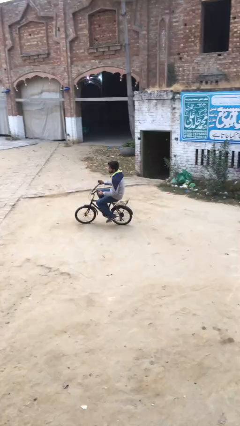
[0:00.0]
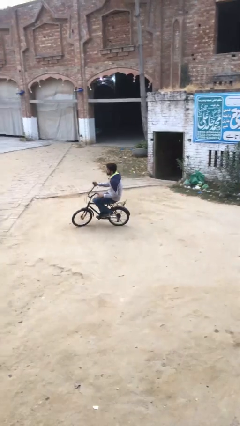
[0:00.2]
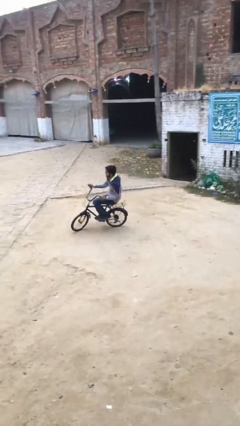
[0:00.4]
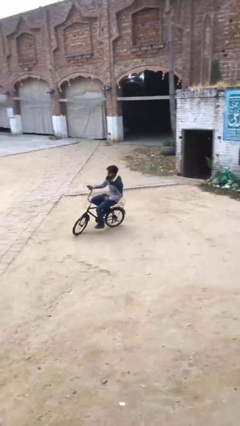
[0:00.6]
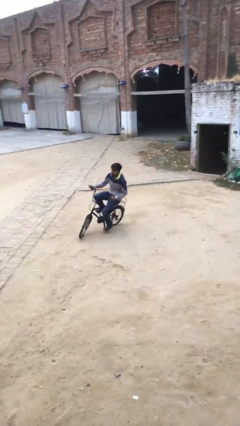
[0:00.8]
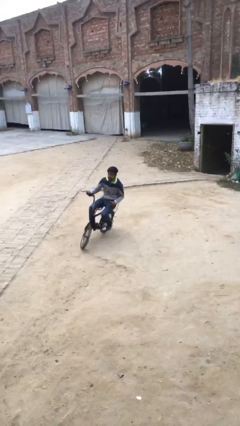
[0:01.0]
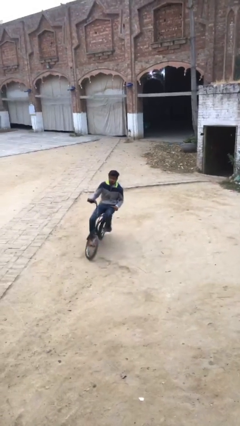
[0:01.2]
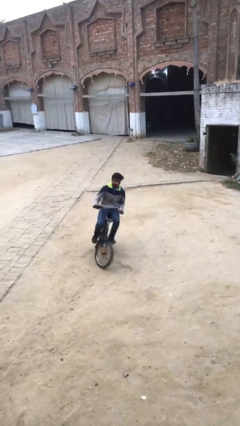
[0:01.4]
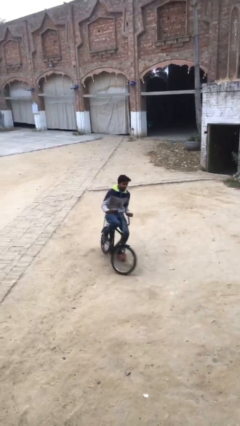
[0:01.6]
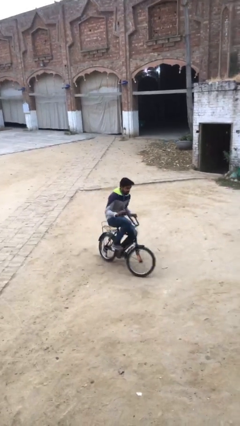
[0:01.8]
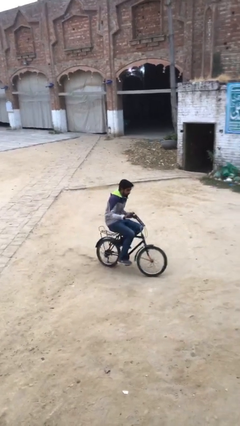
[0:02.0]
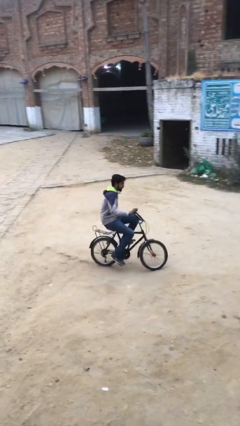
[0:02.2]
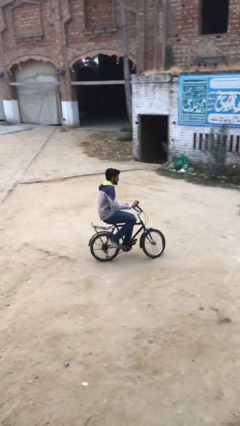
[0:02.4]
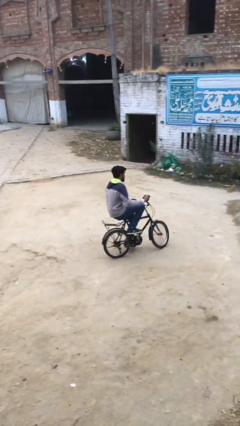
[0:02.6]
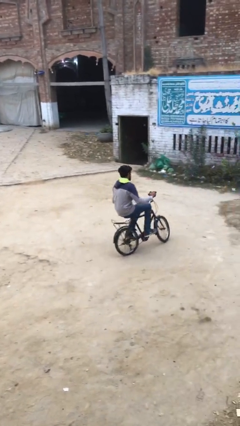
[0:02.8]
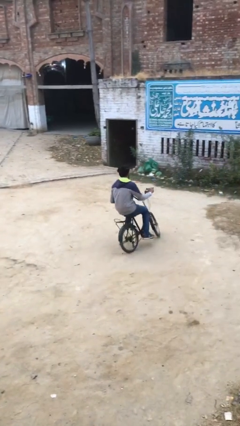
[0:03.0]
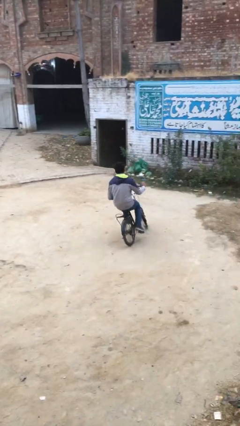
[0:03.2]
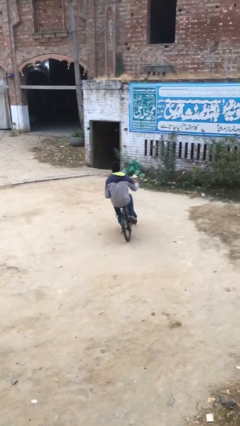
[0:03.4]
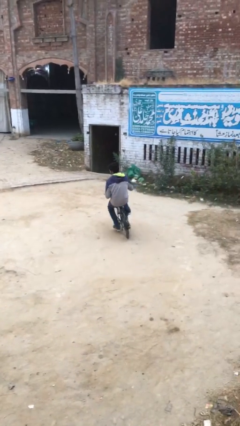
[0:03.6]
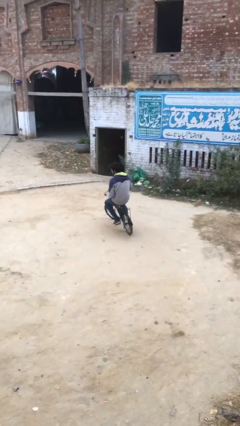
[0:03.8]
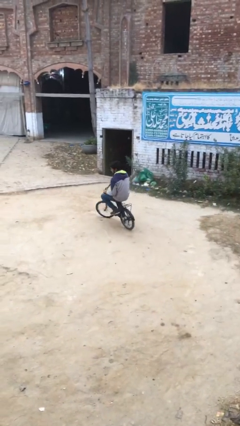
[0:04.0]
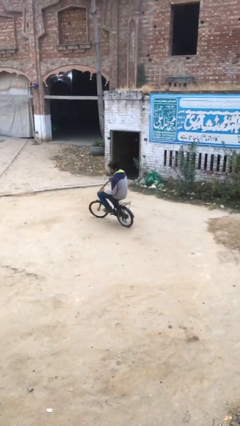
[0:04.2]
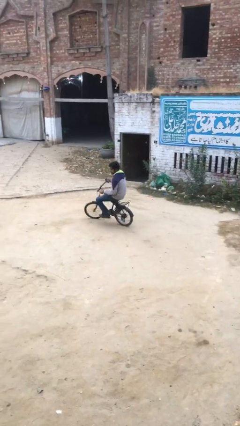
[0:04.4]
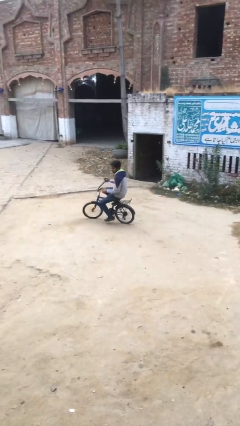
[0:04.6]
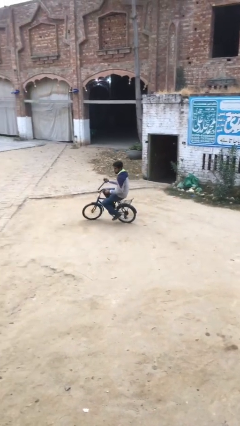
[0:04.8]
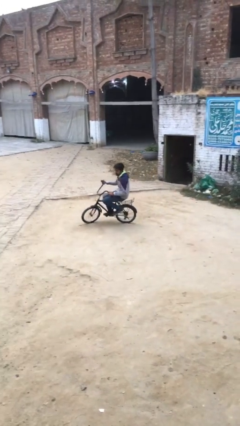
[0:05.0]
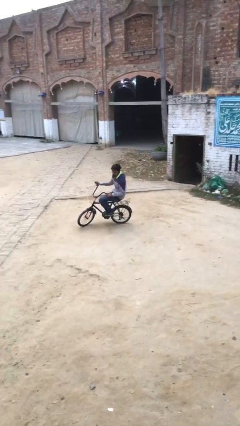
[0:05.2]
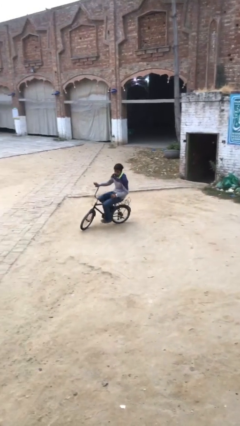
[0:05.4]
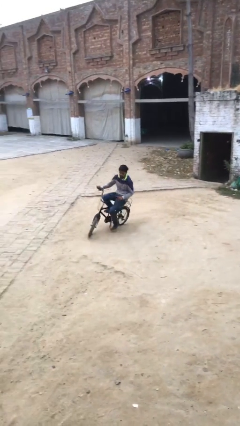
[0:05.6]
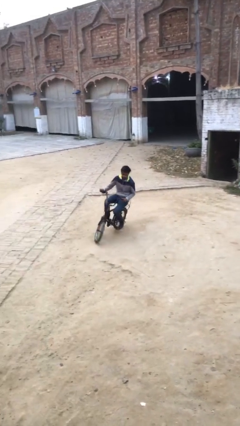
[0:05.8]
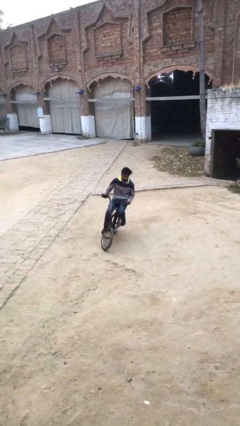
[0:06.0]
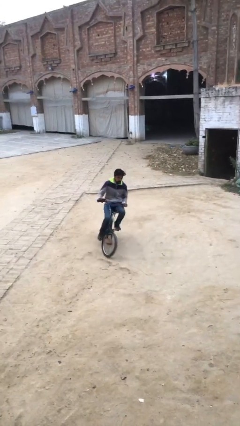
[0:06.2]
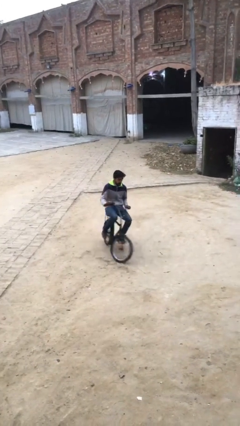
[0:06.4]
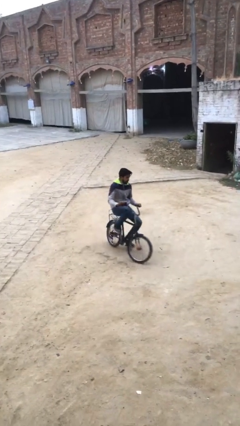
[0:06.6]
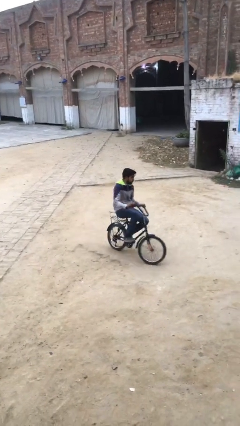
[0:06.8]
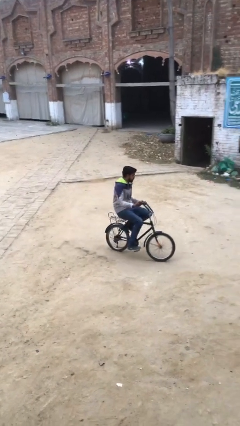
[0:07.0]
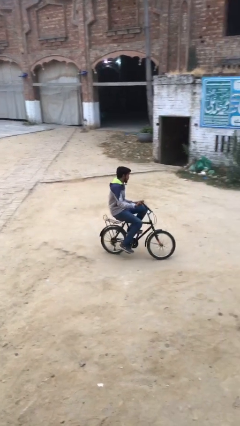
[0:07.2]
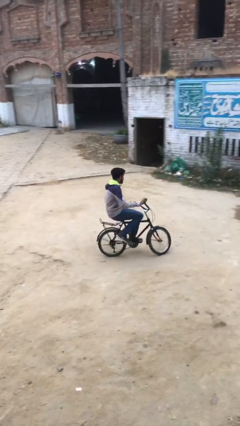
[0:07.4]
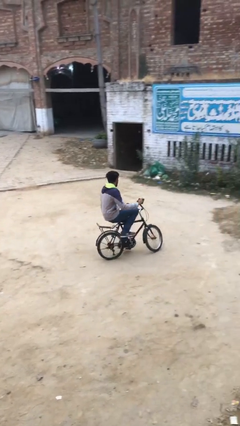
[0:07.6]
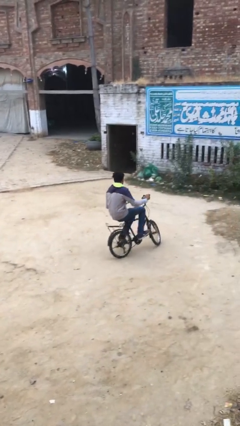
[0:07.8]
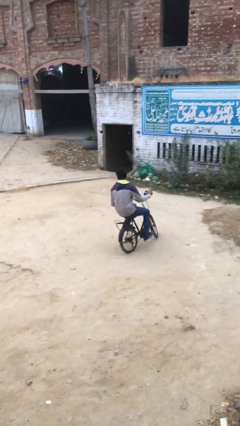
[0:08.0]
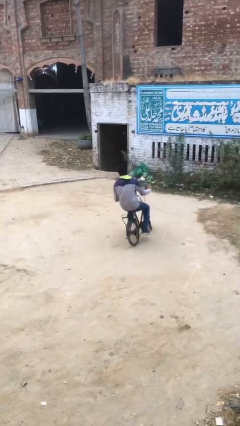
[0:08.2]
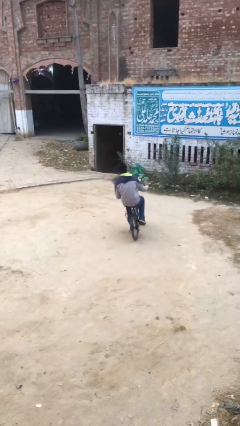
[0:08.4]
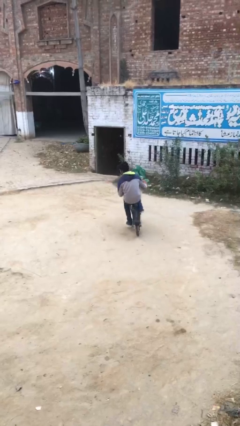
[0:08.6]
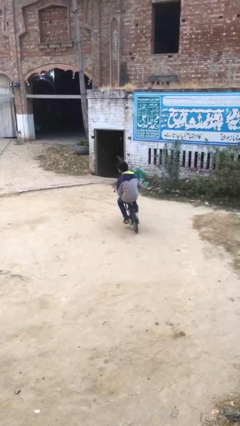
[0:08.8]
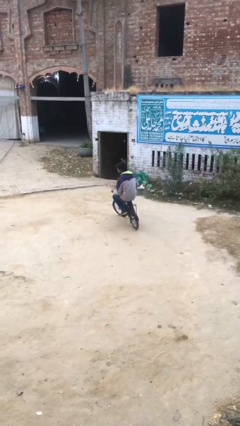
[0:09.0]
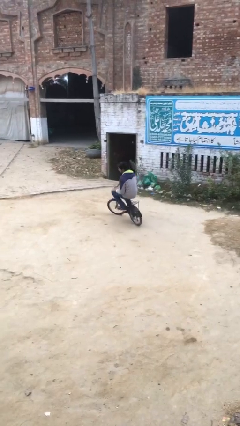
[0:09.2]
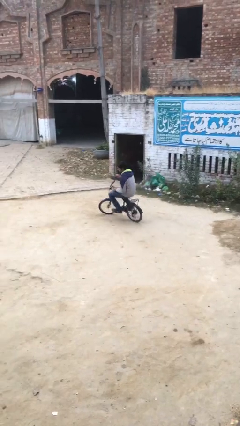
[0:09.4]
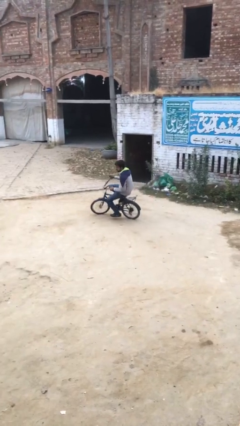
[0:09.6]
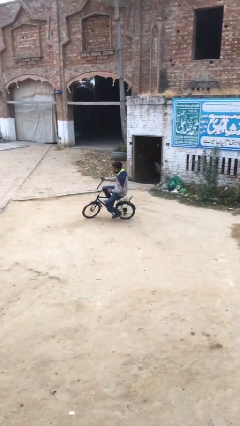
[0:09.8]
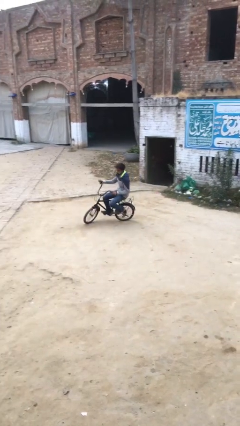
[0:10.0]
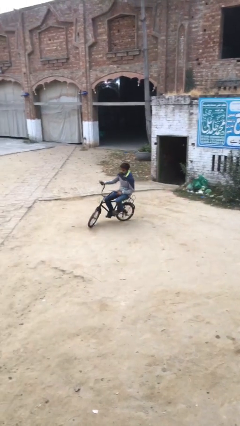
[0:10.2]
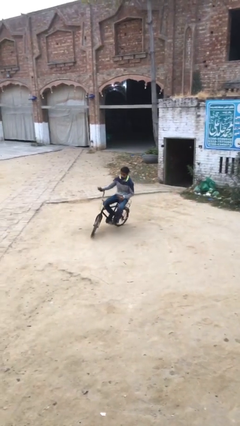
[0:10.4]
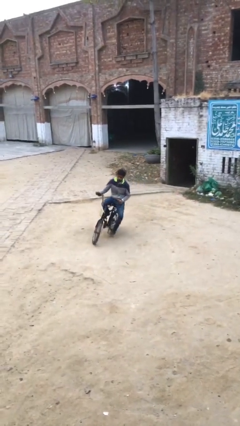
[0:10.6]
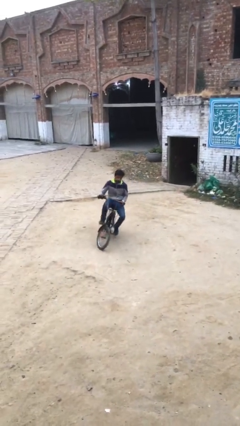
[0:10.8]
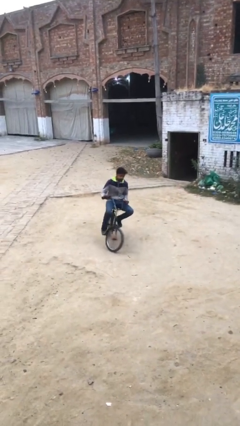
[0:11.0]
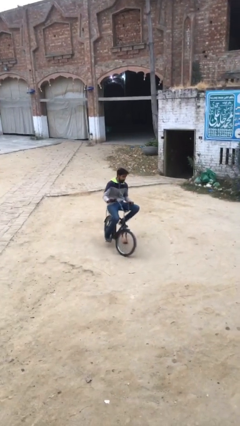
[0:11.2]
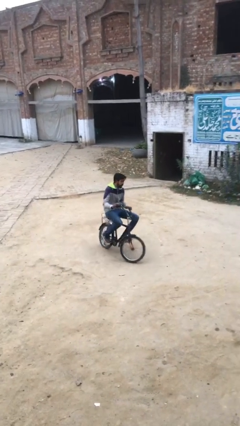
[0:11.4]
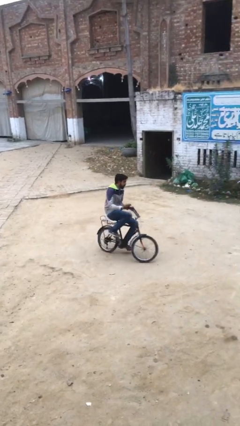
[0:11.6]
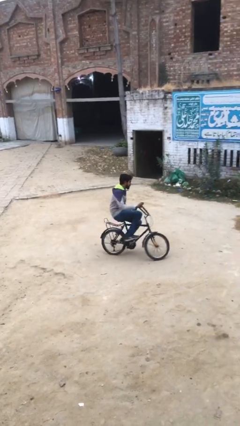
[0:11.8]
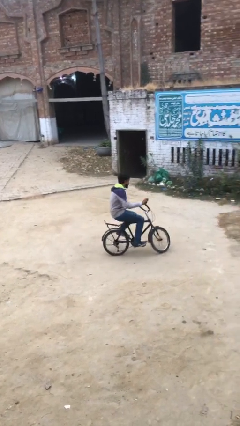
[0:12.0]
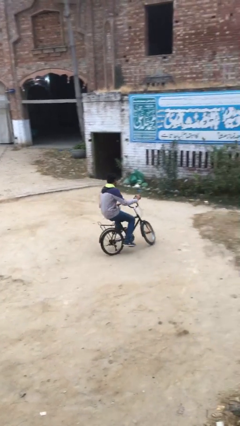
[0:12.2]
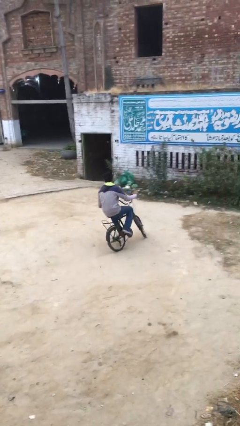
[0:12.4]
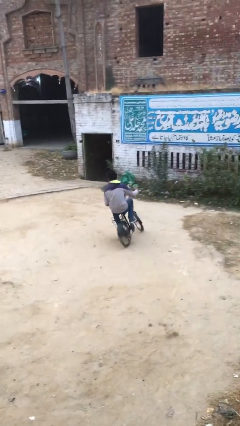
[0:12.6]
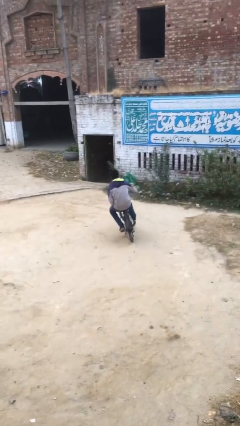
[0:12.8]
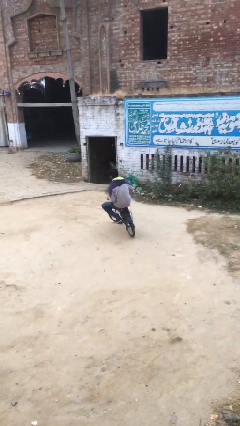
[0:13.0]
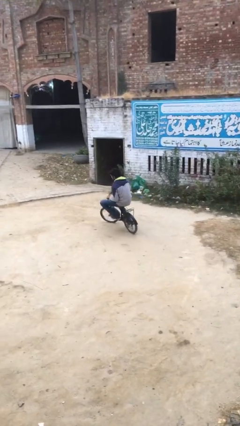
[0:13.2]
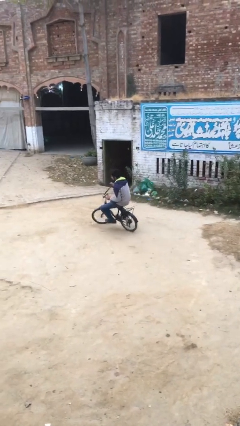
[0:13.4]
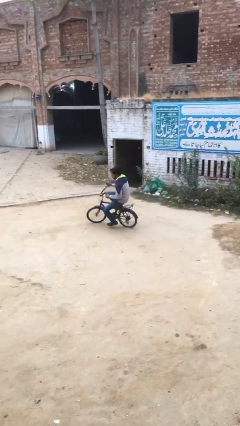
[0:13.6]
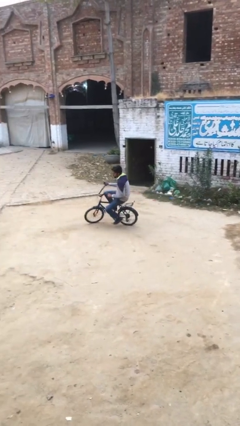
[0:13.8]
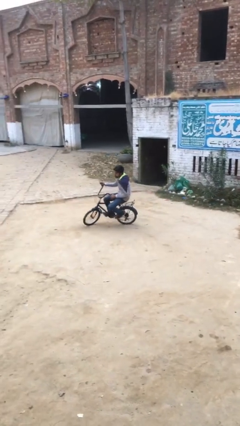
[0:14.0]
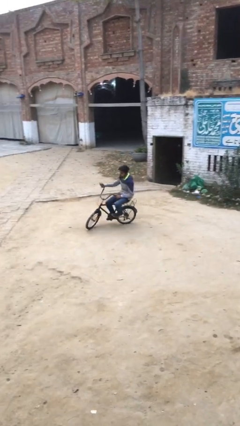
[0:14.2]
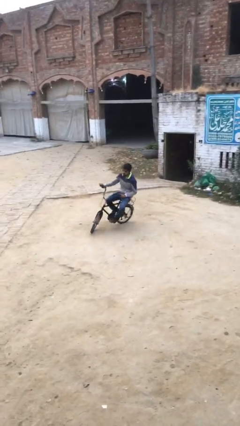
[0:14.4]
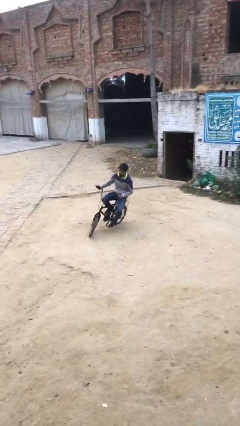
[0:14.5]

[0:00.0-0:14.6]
person rides bicycle

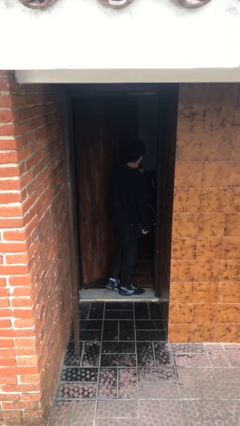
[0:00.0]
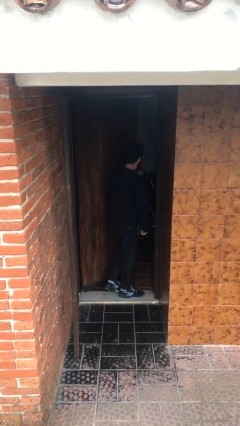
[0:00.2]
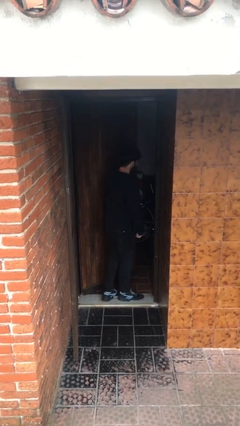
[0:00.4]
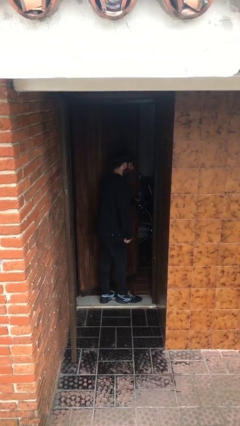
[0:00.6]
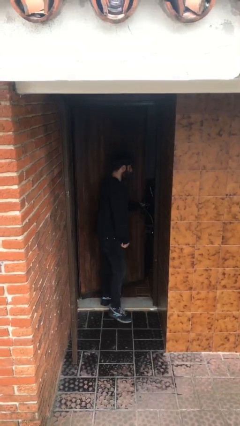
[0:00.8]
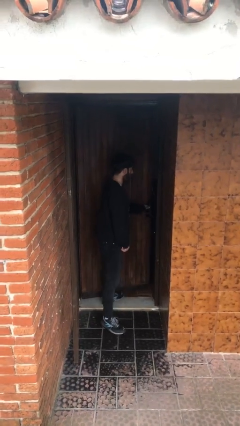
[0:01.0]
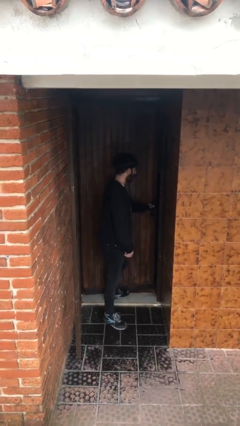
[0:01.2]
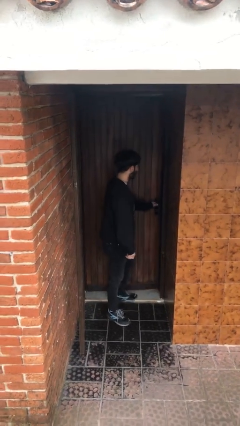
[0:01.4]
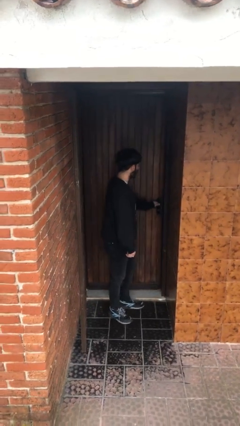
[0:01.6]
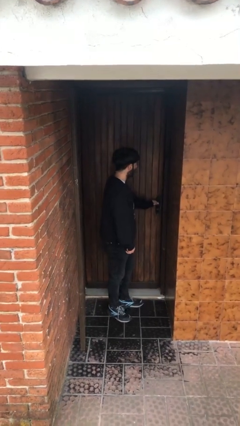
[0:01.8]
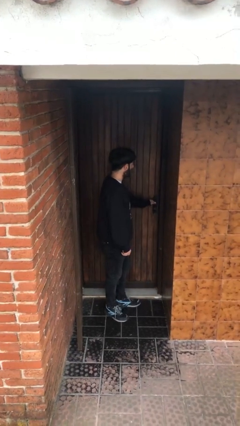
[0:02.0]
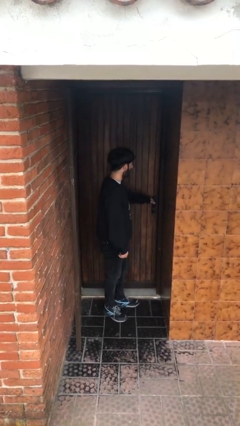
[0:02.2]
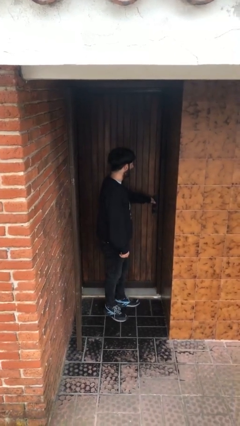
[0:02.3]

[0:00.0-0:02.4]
person closes facility door

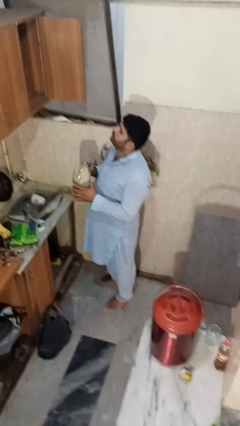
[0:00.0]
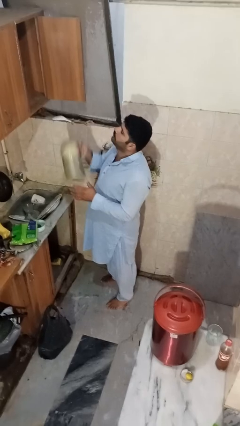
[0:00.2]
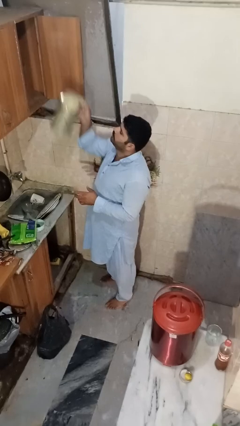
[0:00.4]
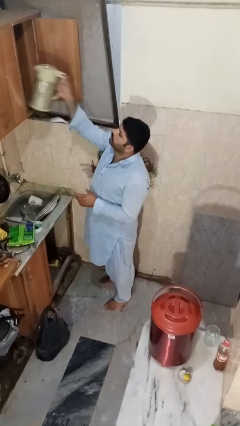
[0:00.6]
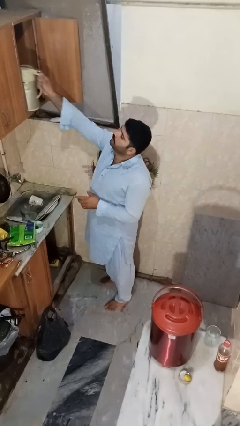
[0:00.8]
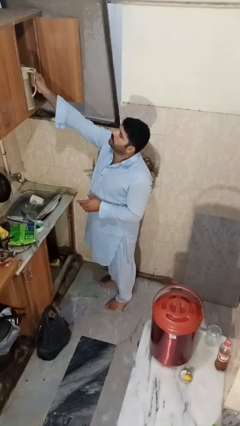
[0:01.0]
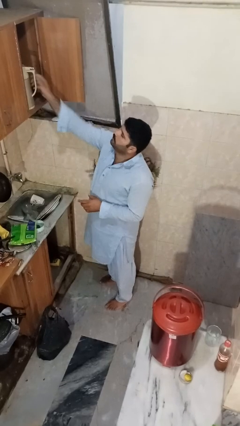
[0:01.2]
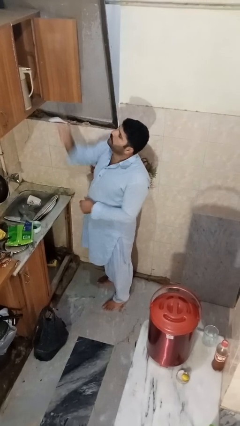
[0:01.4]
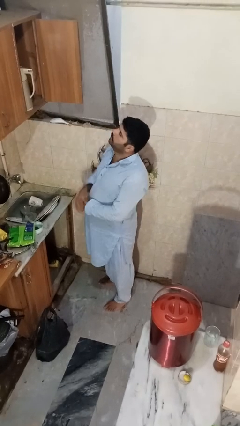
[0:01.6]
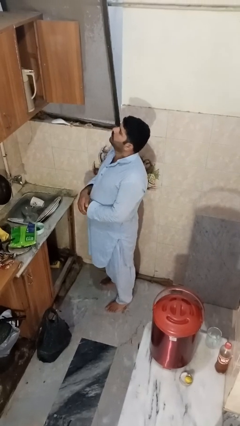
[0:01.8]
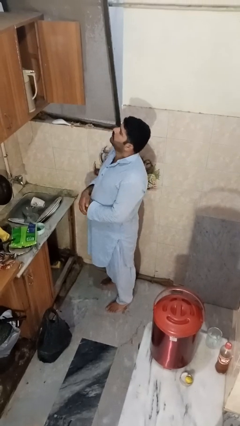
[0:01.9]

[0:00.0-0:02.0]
person puts object in cabinet
